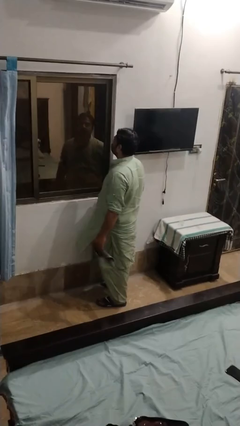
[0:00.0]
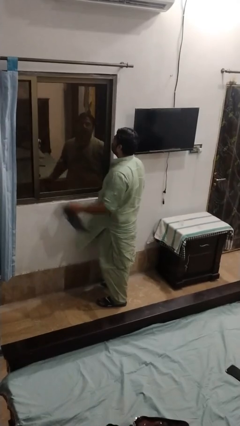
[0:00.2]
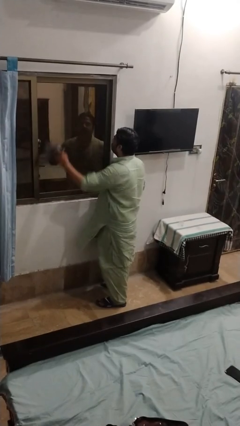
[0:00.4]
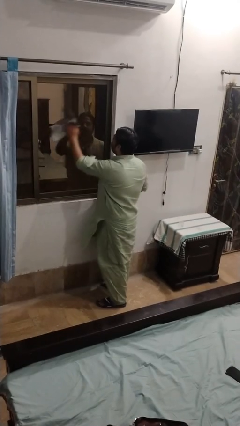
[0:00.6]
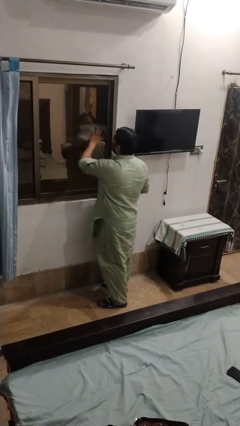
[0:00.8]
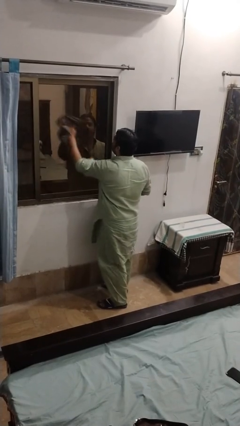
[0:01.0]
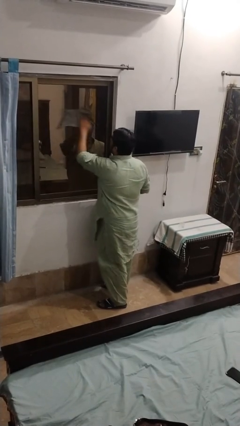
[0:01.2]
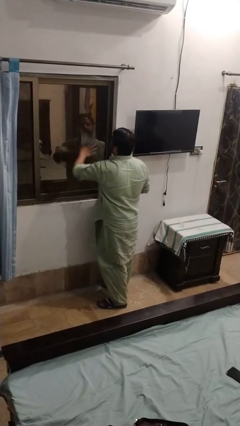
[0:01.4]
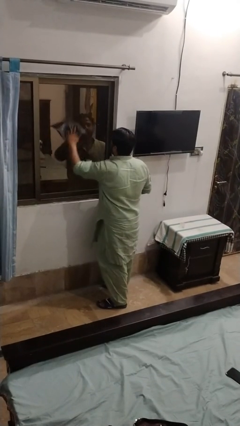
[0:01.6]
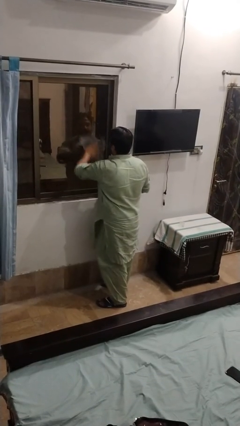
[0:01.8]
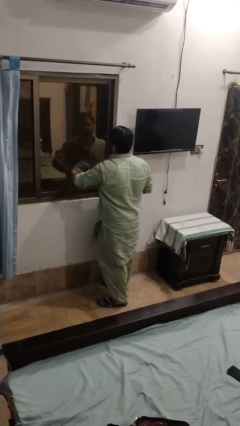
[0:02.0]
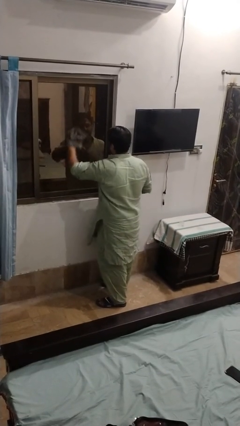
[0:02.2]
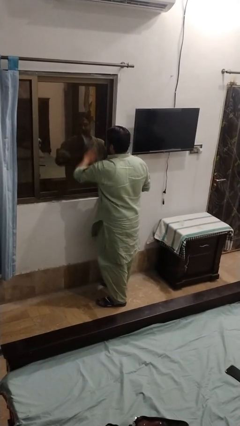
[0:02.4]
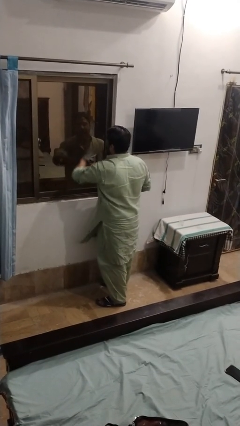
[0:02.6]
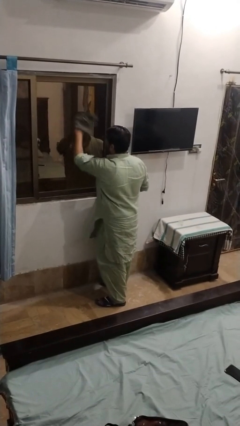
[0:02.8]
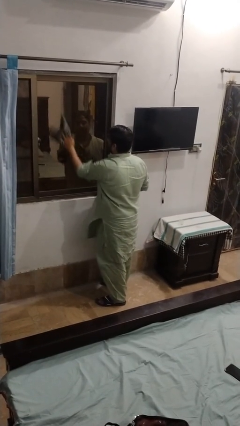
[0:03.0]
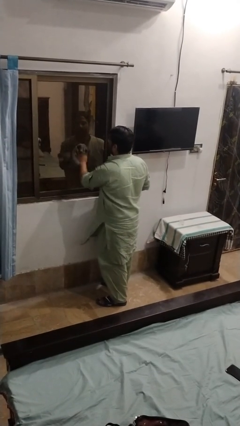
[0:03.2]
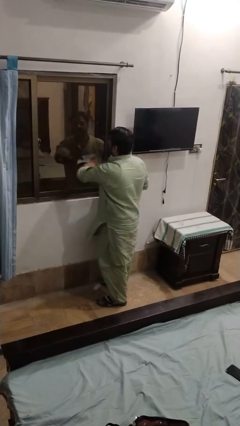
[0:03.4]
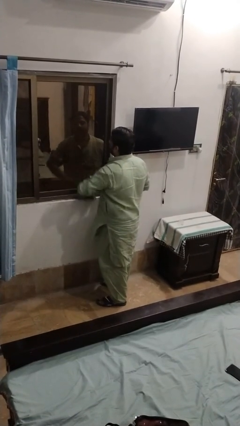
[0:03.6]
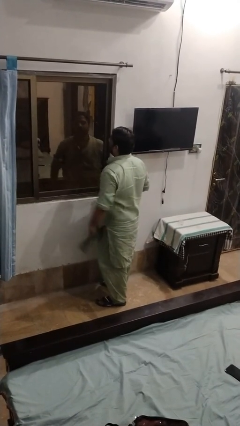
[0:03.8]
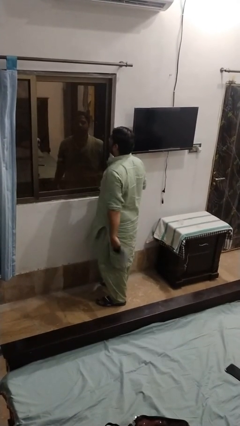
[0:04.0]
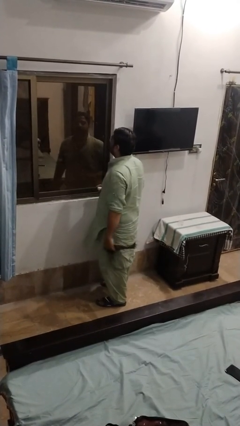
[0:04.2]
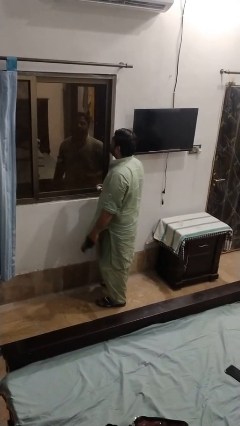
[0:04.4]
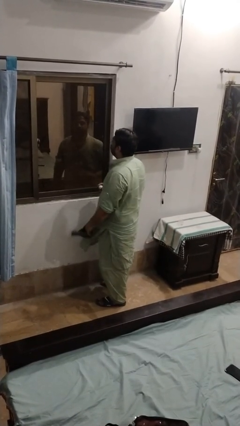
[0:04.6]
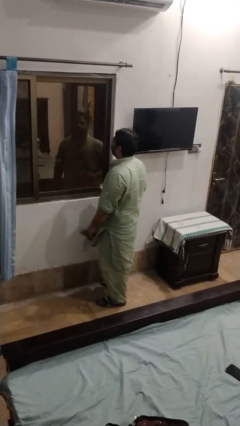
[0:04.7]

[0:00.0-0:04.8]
person washes window

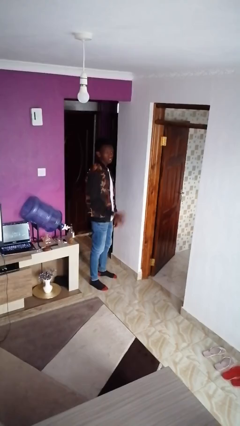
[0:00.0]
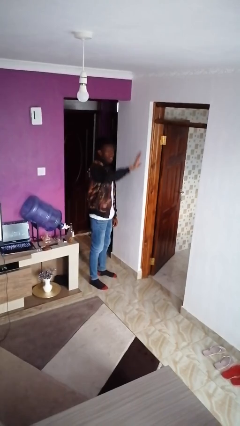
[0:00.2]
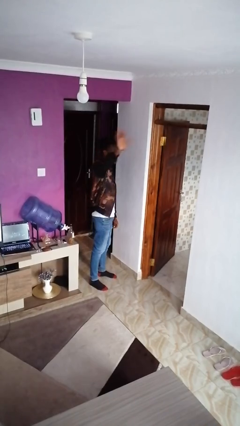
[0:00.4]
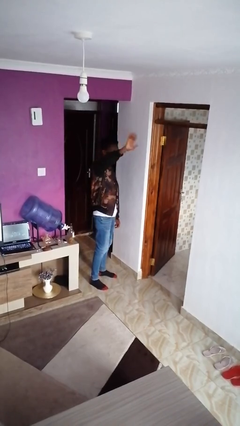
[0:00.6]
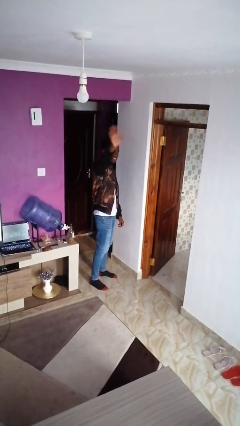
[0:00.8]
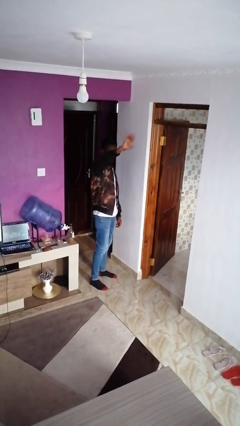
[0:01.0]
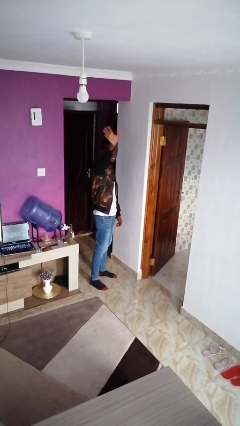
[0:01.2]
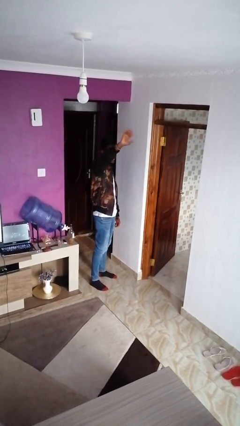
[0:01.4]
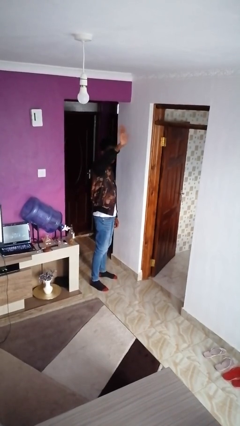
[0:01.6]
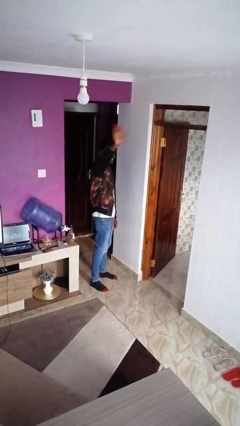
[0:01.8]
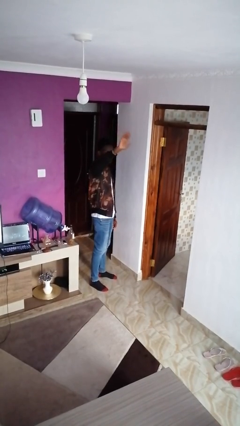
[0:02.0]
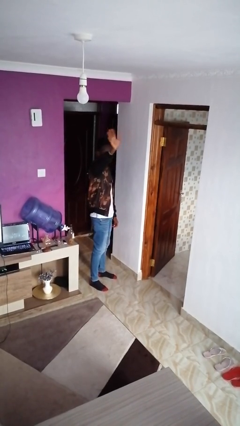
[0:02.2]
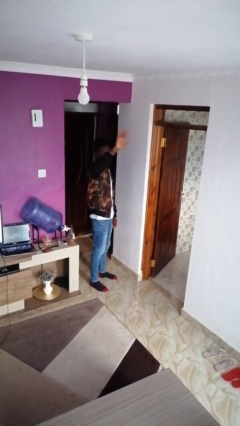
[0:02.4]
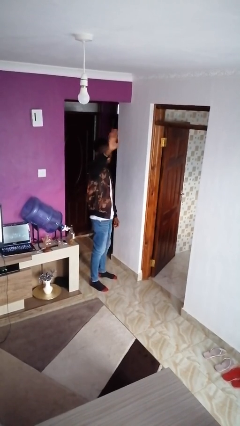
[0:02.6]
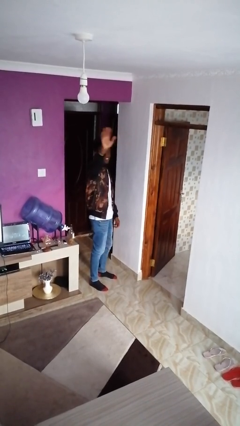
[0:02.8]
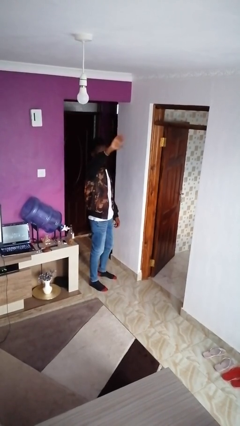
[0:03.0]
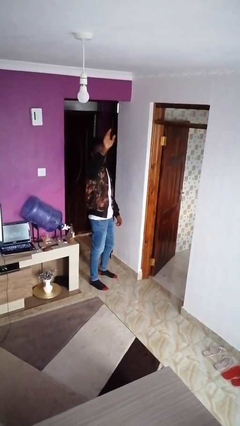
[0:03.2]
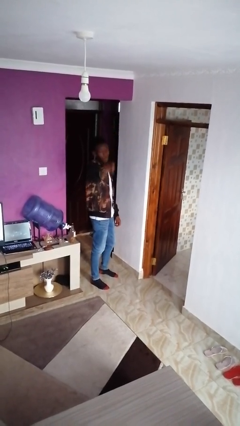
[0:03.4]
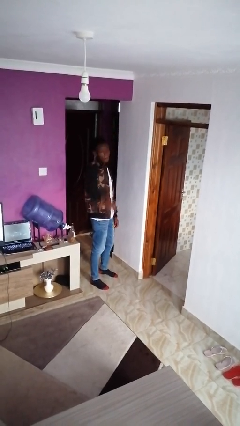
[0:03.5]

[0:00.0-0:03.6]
person waves at person

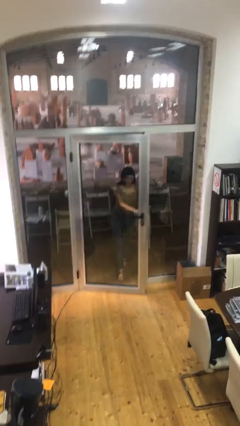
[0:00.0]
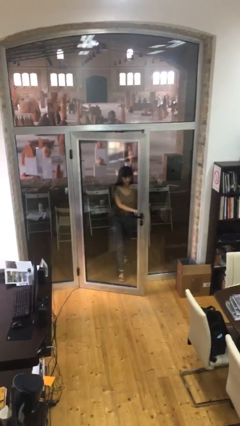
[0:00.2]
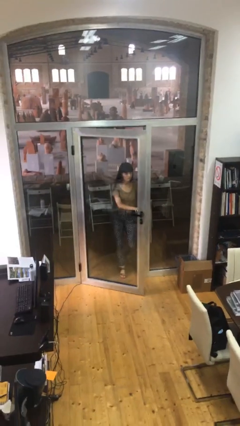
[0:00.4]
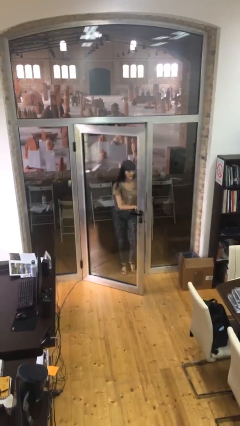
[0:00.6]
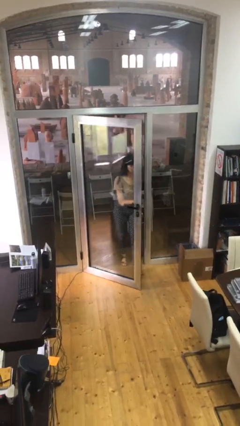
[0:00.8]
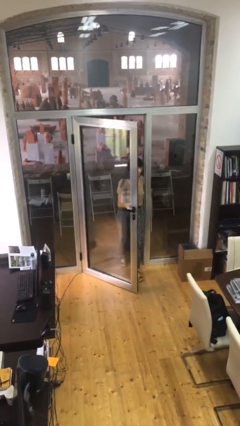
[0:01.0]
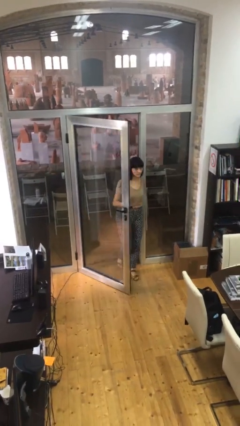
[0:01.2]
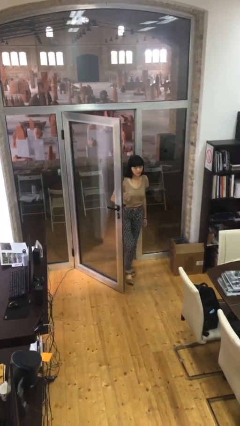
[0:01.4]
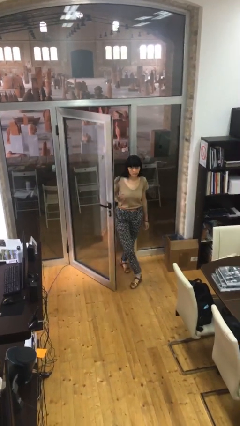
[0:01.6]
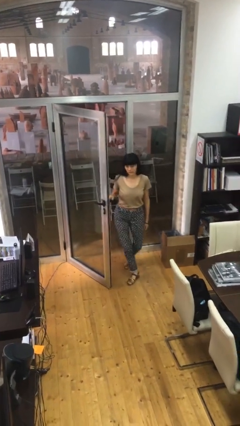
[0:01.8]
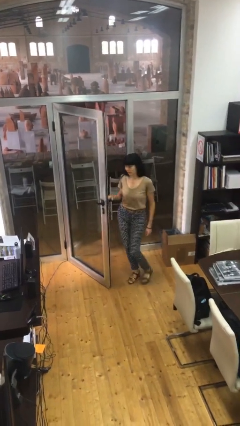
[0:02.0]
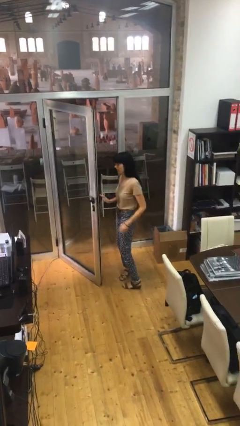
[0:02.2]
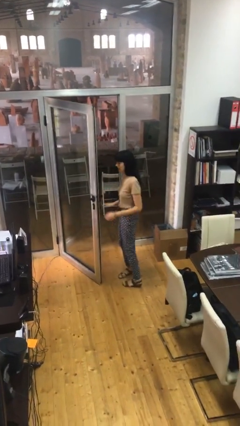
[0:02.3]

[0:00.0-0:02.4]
person enters scene through structure

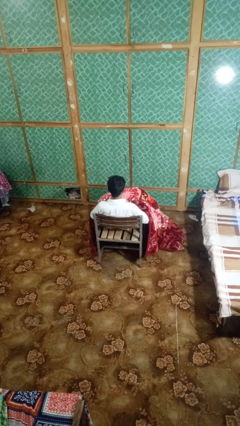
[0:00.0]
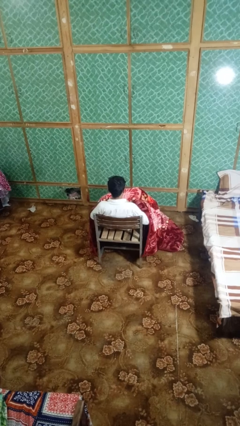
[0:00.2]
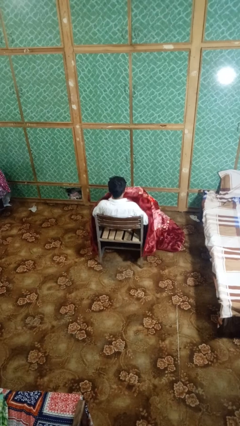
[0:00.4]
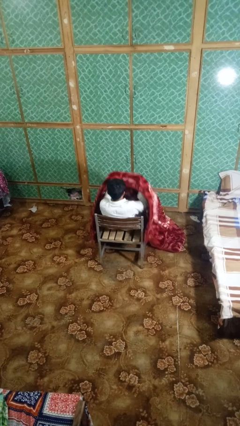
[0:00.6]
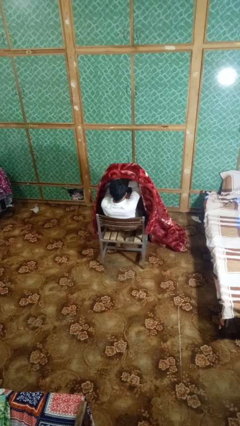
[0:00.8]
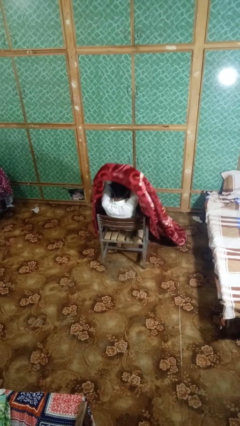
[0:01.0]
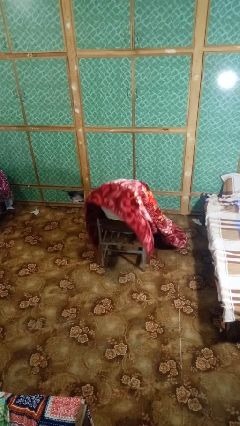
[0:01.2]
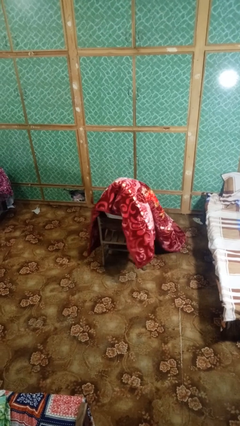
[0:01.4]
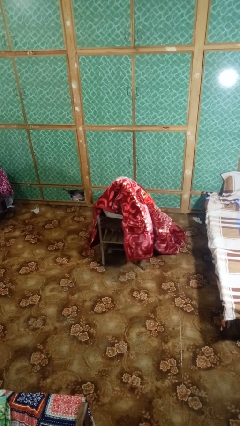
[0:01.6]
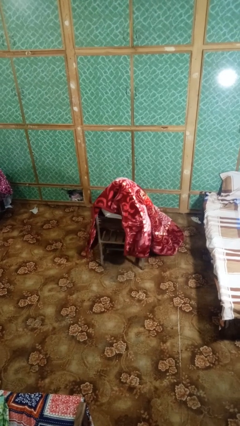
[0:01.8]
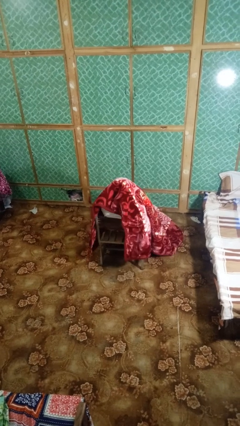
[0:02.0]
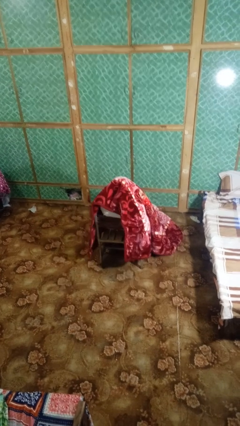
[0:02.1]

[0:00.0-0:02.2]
person covers with blanket

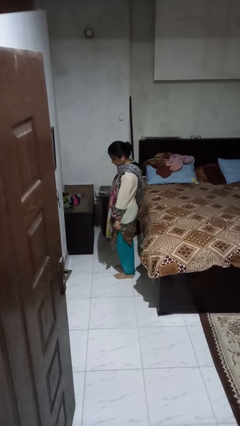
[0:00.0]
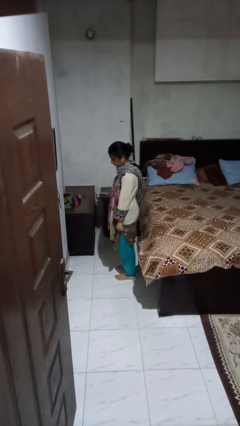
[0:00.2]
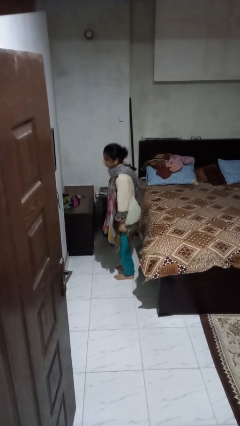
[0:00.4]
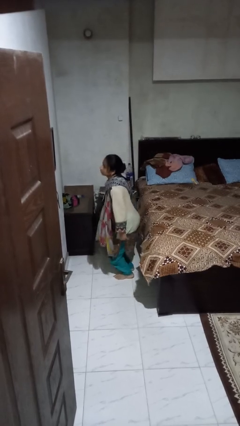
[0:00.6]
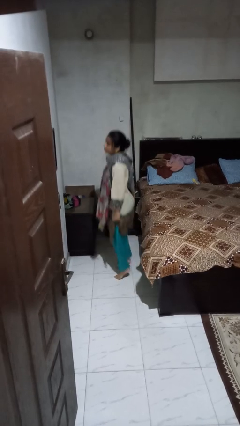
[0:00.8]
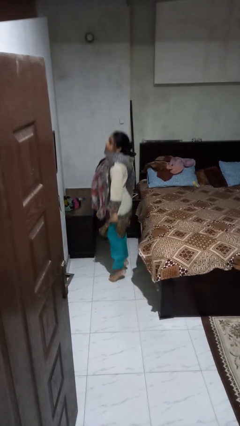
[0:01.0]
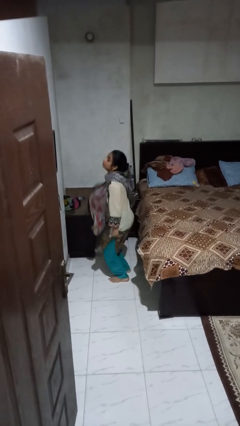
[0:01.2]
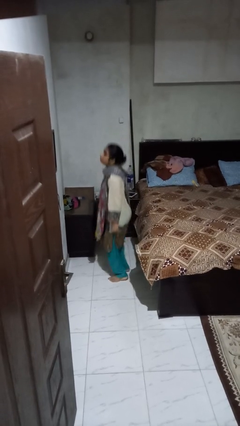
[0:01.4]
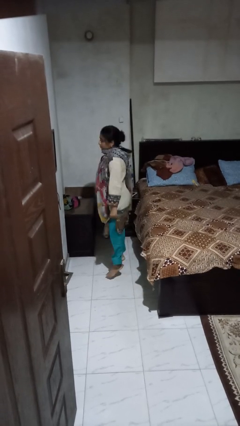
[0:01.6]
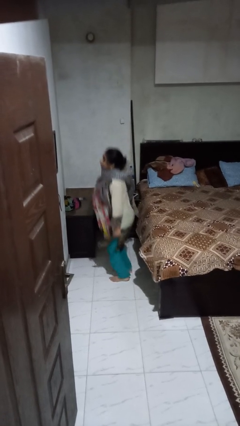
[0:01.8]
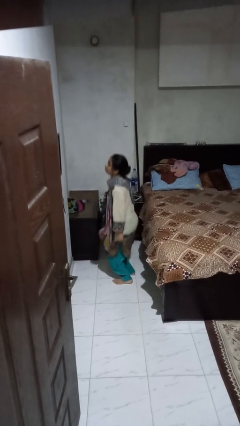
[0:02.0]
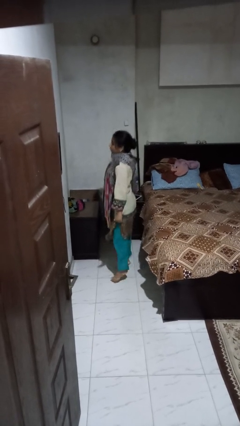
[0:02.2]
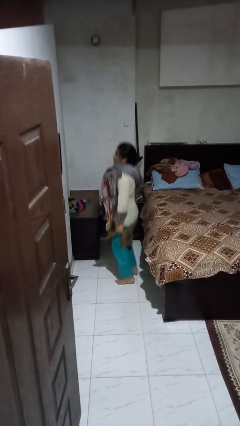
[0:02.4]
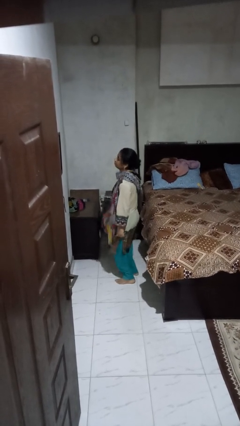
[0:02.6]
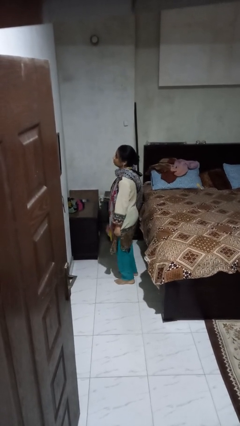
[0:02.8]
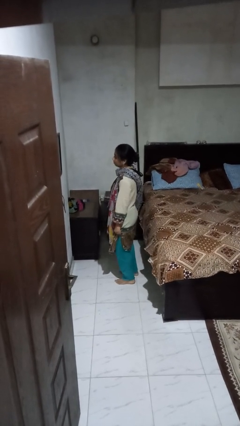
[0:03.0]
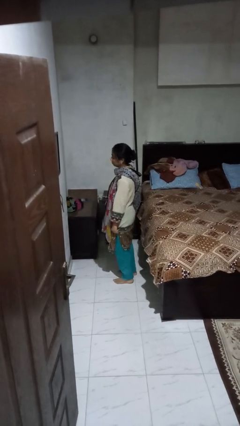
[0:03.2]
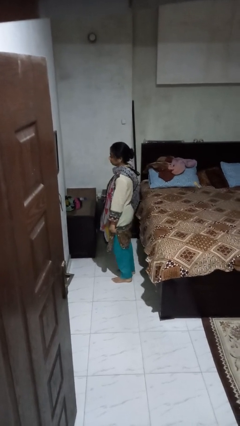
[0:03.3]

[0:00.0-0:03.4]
person jumps

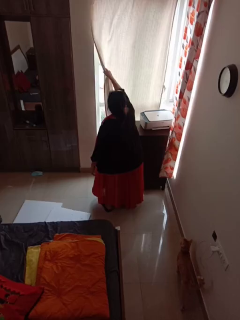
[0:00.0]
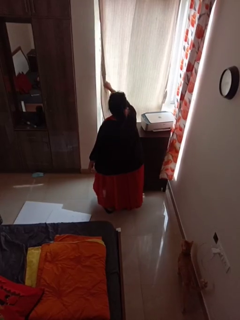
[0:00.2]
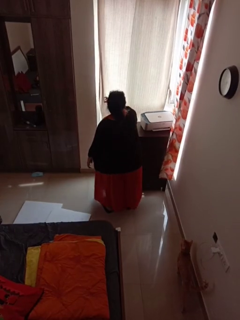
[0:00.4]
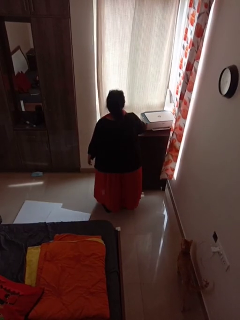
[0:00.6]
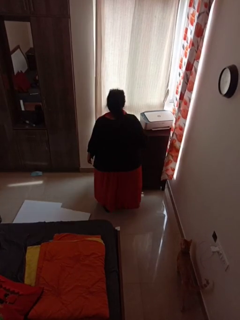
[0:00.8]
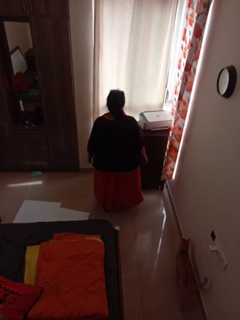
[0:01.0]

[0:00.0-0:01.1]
person closes curtains

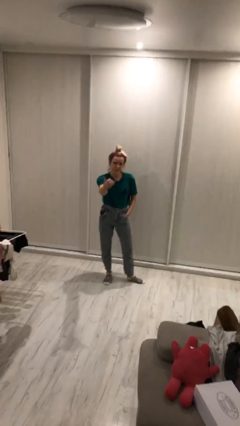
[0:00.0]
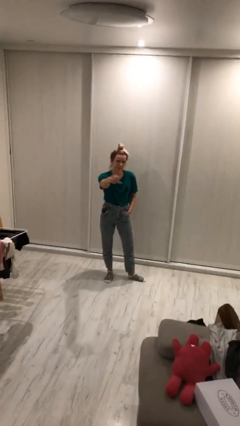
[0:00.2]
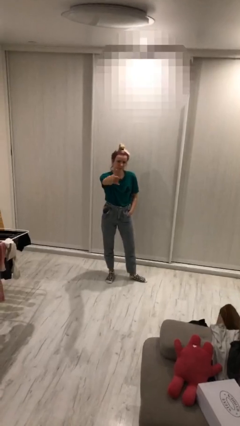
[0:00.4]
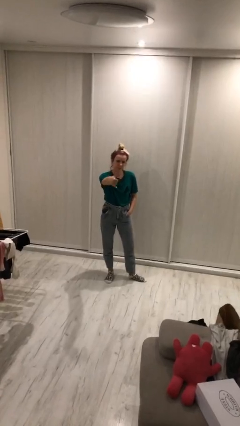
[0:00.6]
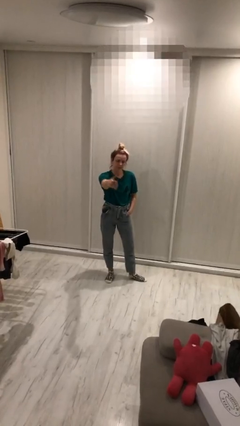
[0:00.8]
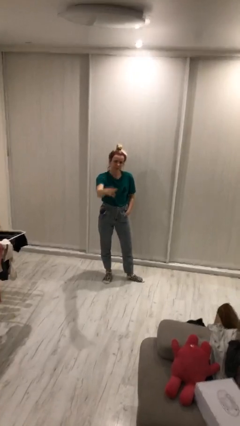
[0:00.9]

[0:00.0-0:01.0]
person gestures hang loose
